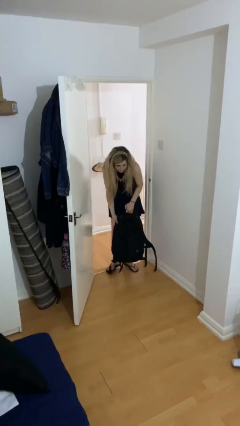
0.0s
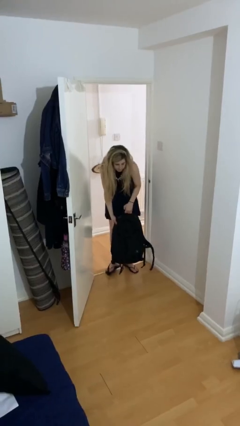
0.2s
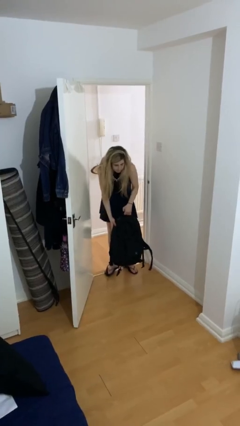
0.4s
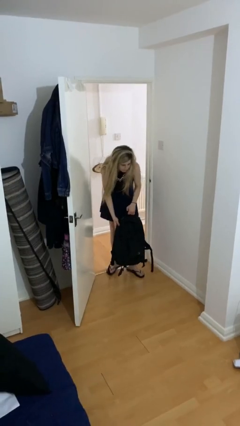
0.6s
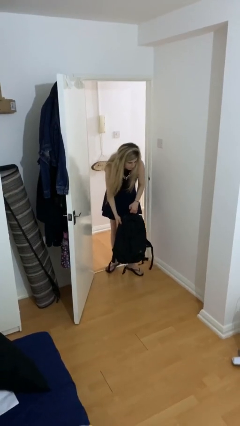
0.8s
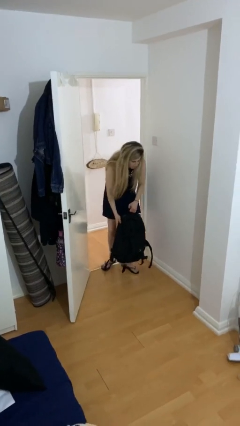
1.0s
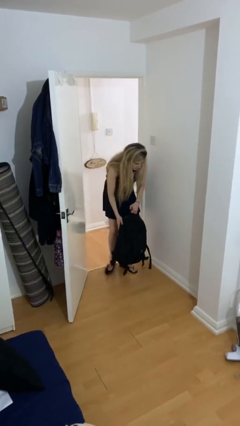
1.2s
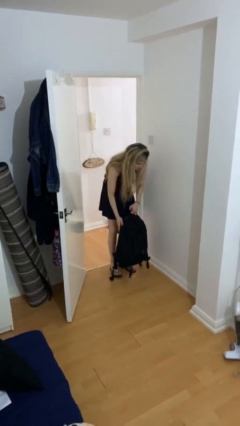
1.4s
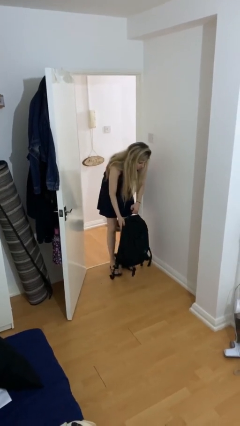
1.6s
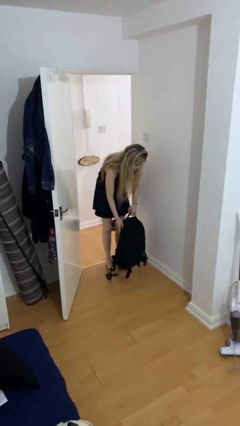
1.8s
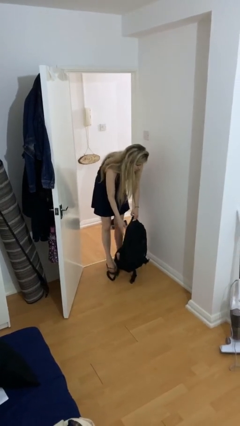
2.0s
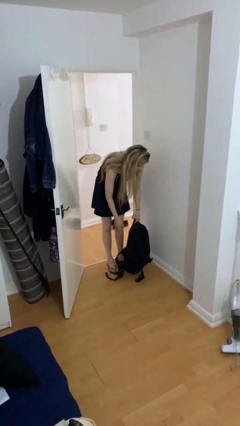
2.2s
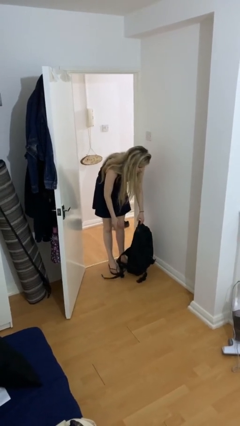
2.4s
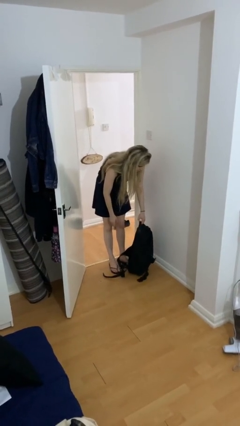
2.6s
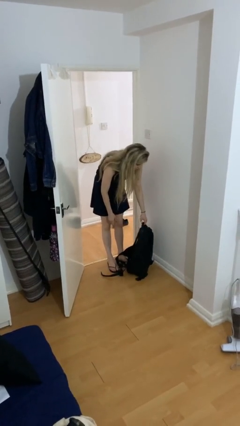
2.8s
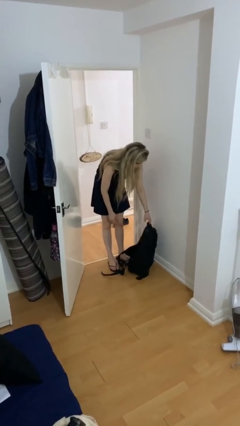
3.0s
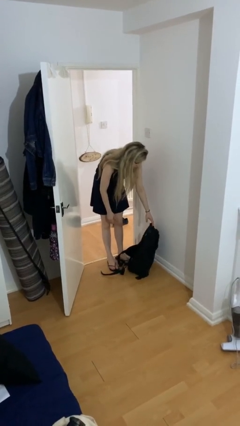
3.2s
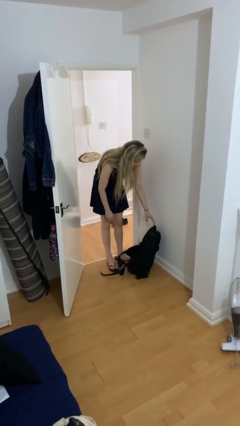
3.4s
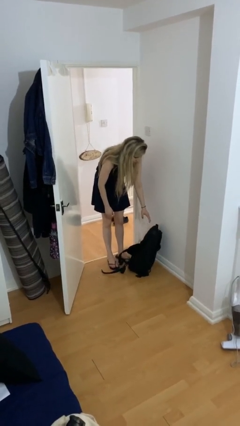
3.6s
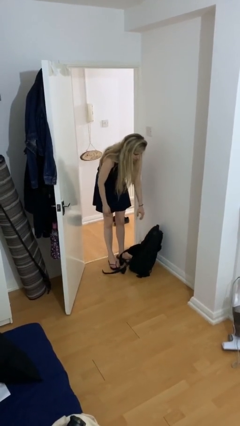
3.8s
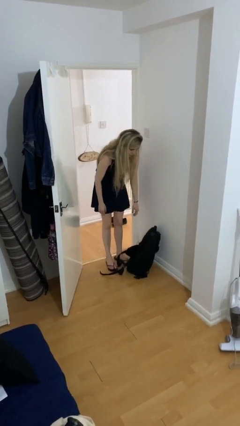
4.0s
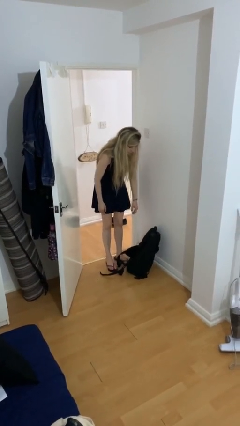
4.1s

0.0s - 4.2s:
person puts down object on floor

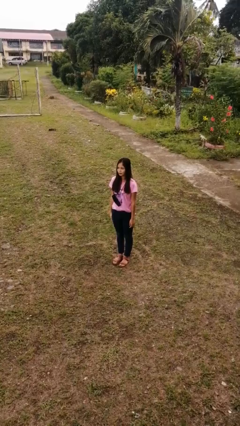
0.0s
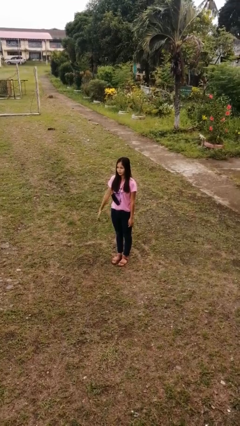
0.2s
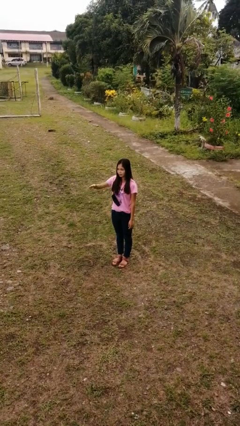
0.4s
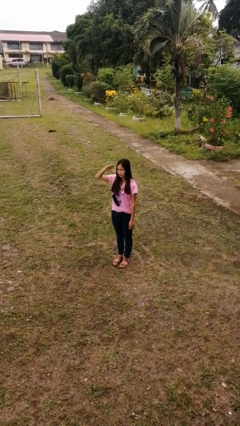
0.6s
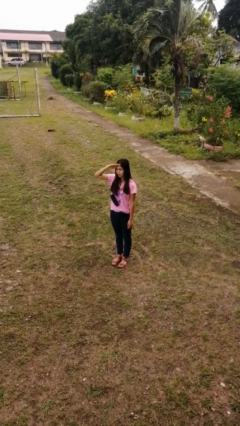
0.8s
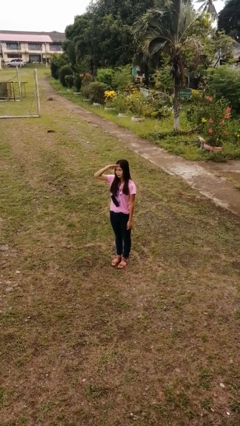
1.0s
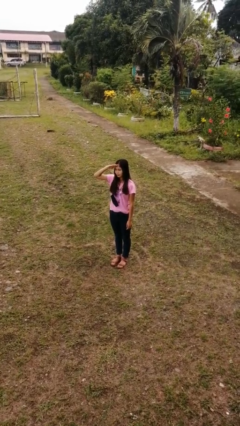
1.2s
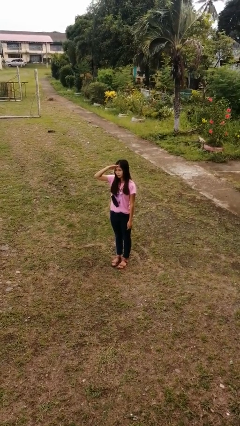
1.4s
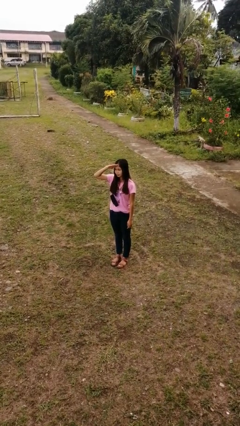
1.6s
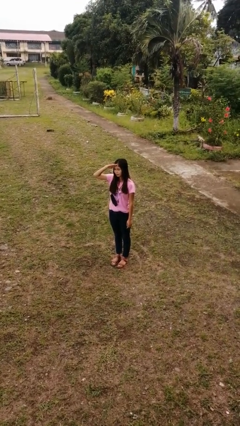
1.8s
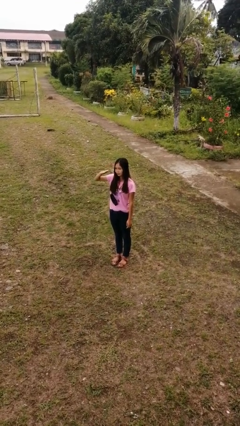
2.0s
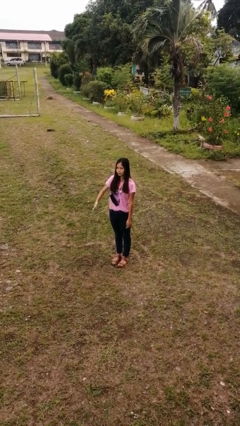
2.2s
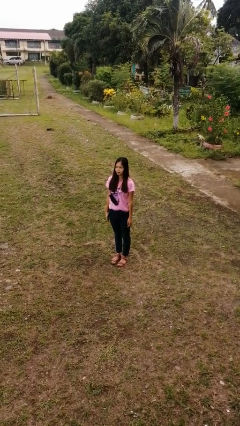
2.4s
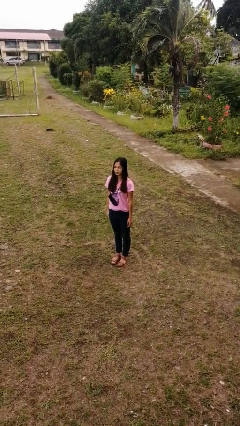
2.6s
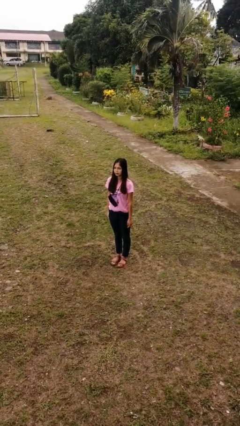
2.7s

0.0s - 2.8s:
person salutes

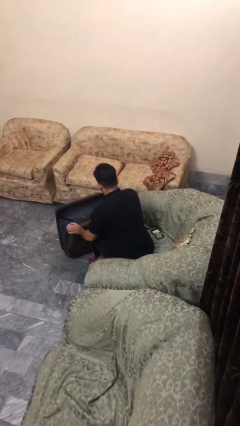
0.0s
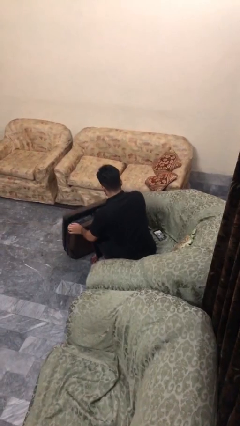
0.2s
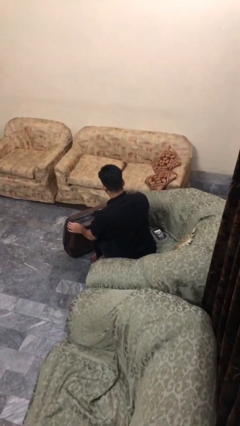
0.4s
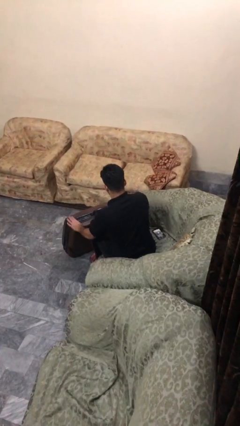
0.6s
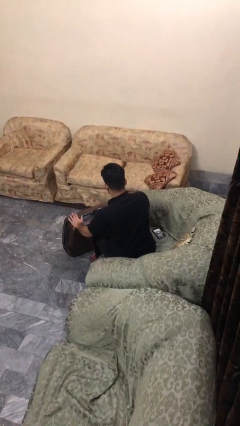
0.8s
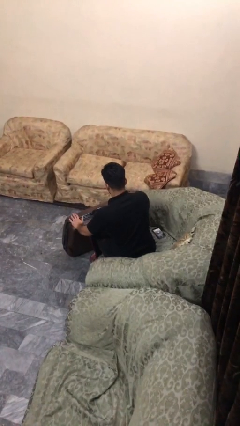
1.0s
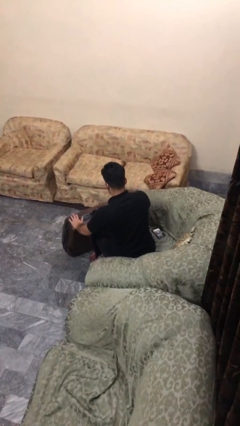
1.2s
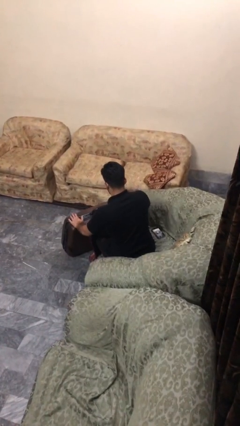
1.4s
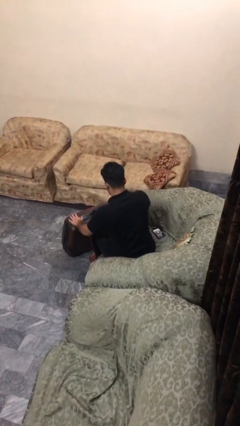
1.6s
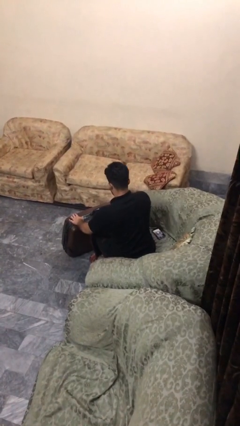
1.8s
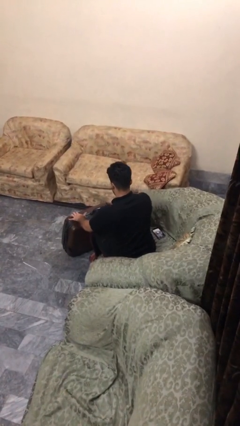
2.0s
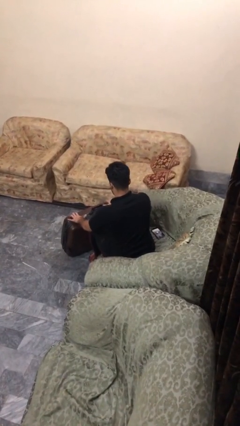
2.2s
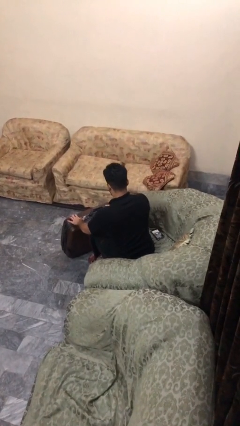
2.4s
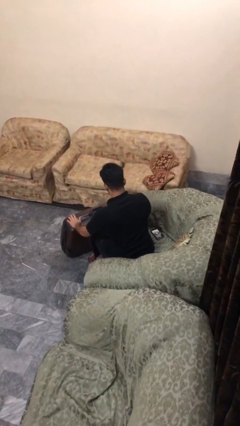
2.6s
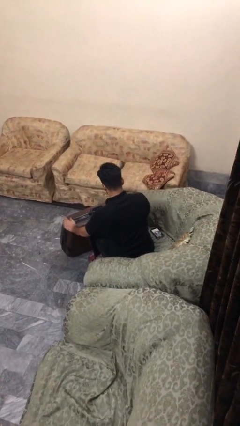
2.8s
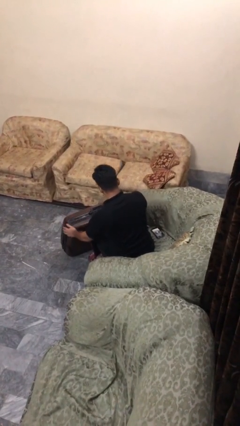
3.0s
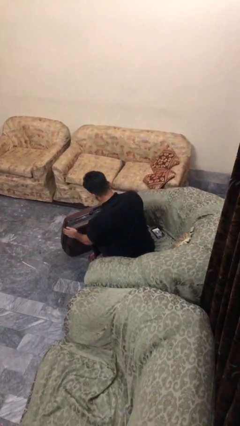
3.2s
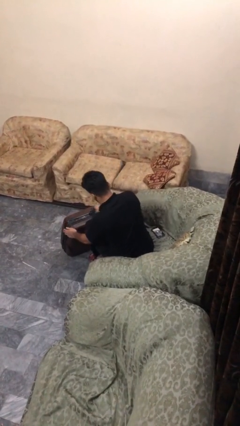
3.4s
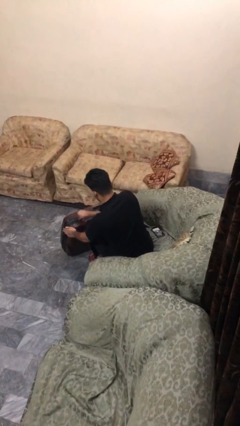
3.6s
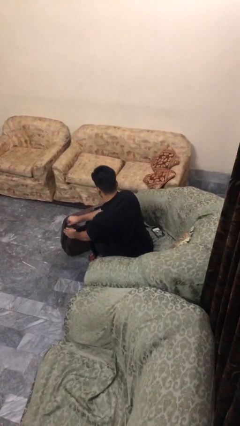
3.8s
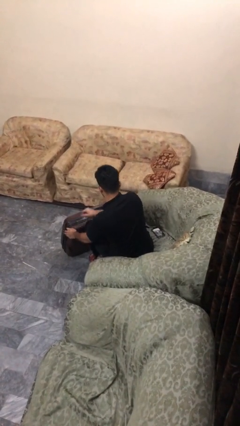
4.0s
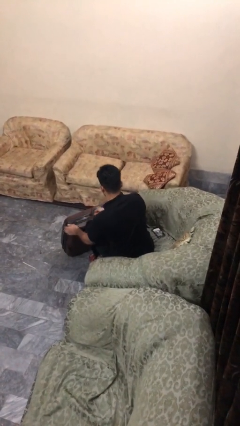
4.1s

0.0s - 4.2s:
person closes suitcase

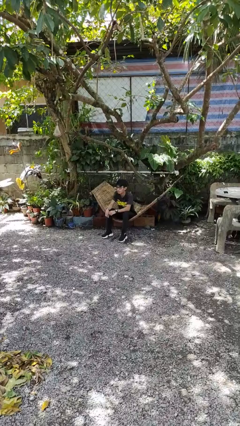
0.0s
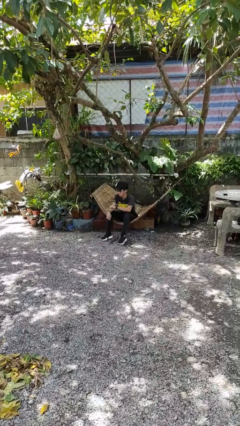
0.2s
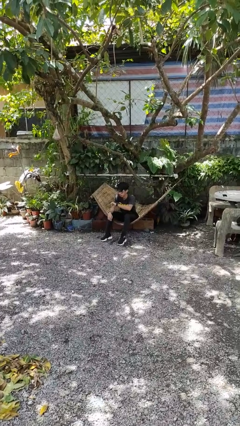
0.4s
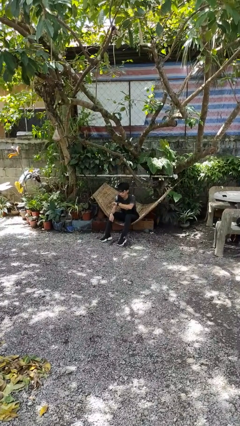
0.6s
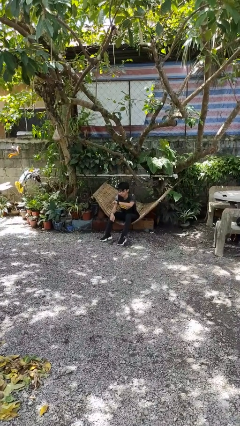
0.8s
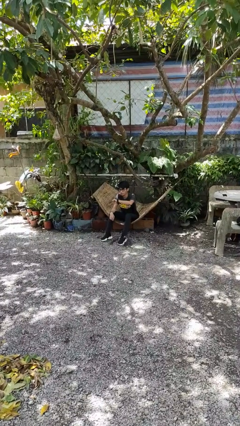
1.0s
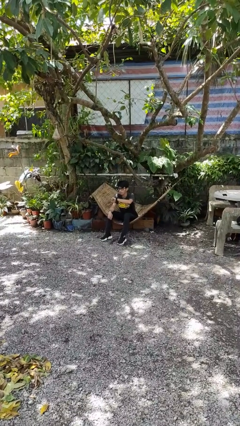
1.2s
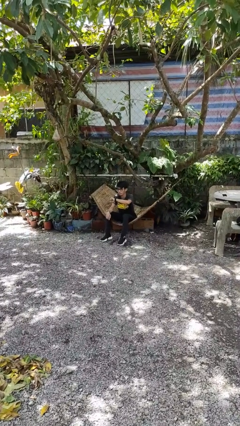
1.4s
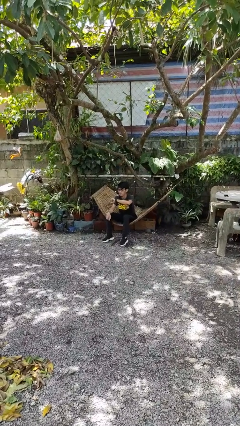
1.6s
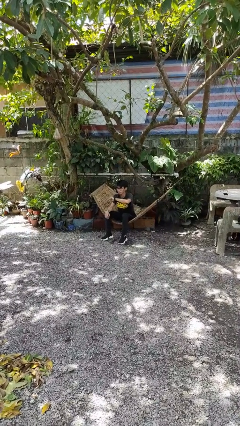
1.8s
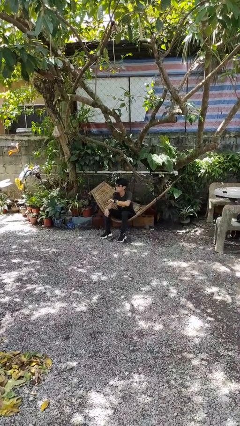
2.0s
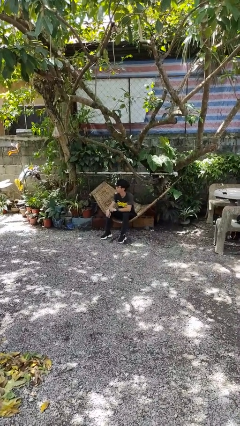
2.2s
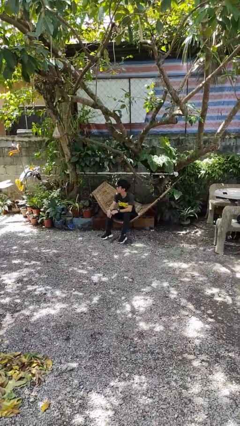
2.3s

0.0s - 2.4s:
person looks at wristwatch

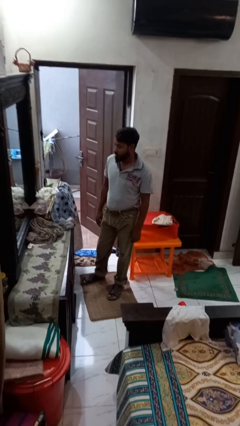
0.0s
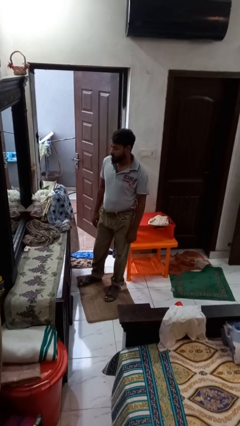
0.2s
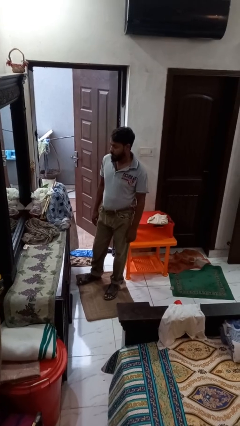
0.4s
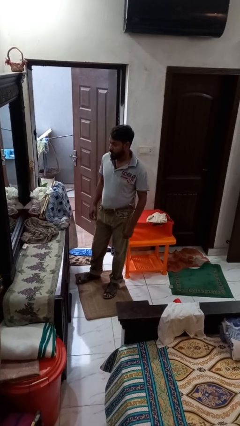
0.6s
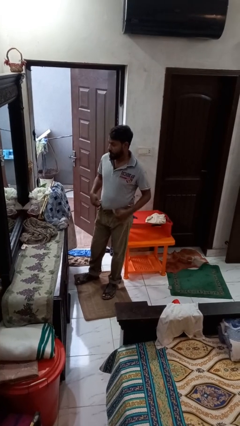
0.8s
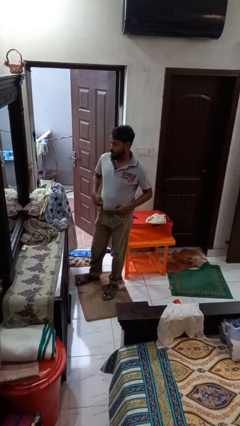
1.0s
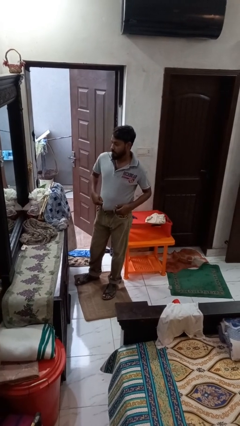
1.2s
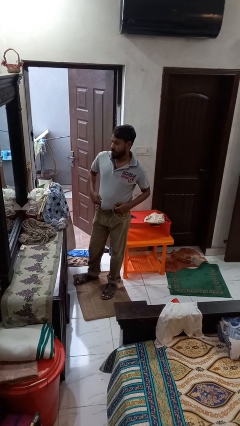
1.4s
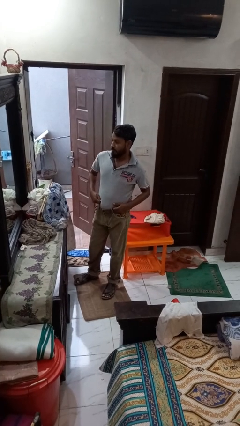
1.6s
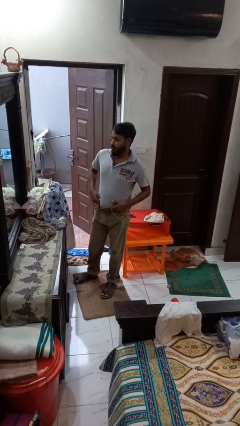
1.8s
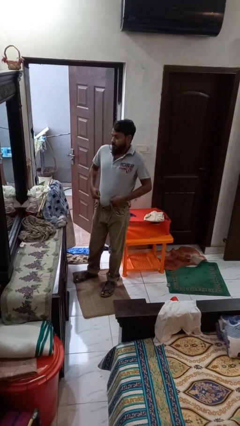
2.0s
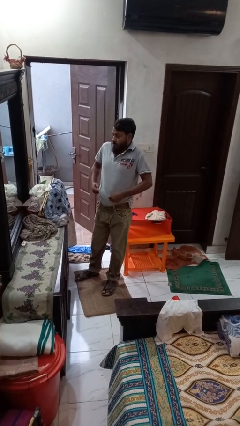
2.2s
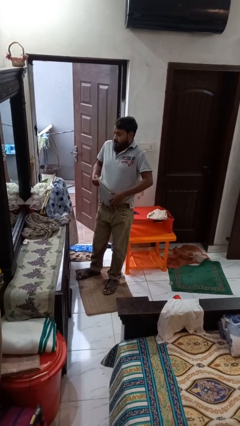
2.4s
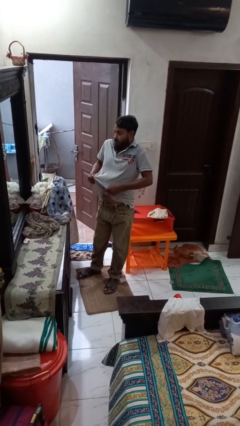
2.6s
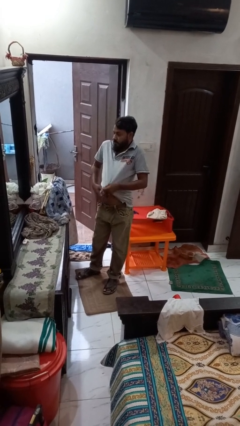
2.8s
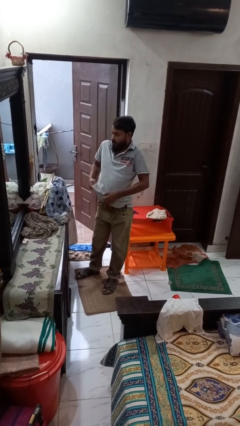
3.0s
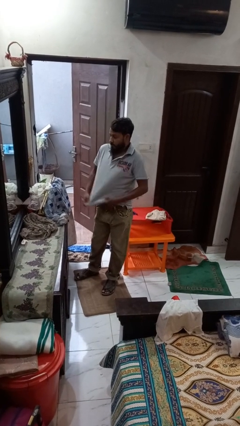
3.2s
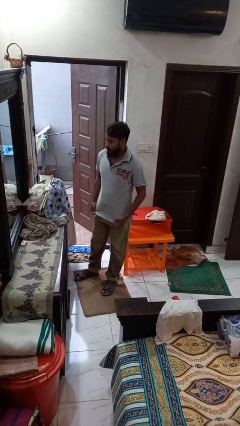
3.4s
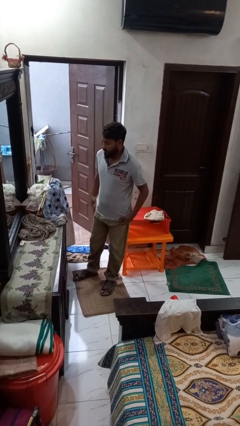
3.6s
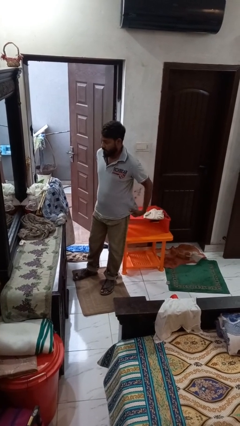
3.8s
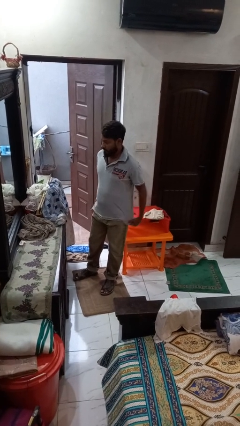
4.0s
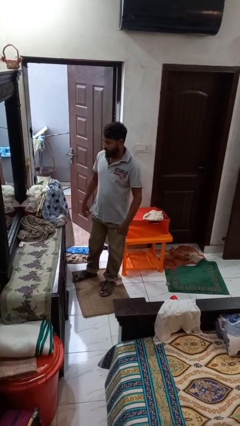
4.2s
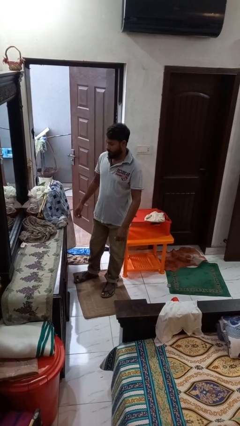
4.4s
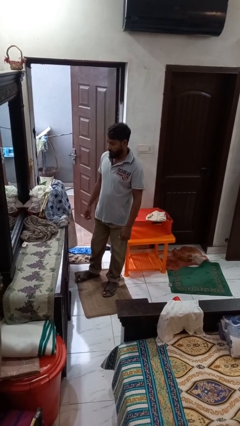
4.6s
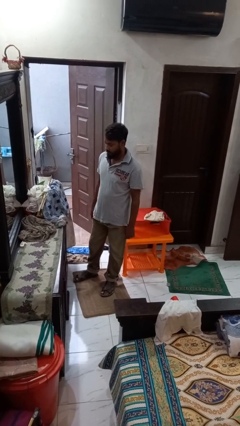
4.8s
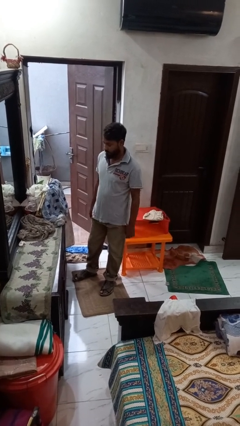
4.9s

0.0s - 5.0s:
person untucks shirt
